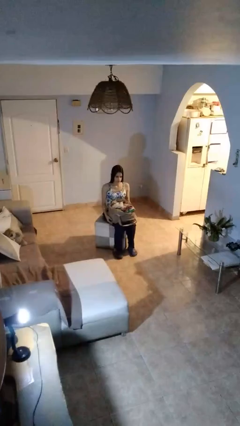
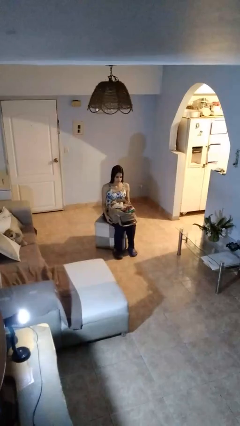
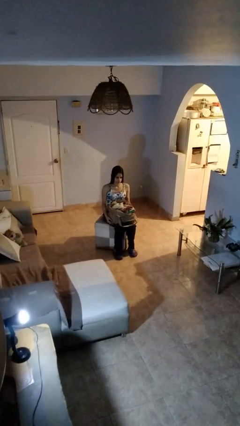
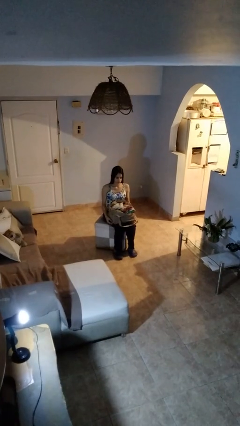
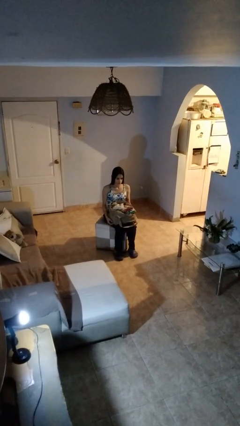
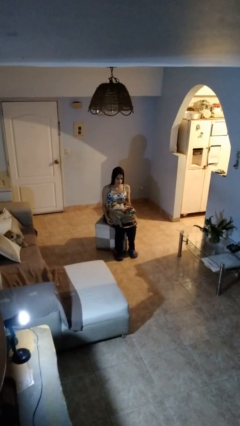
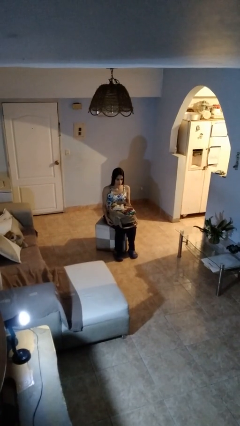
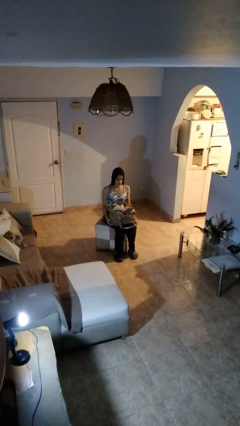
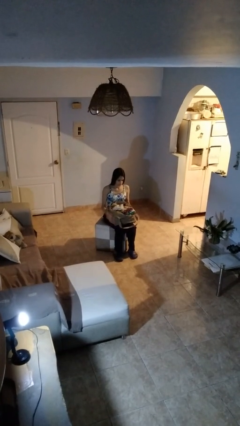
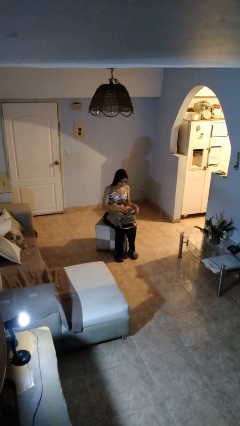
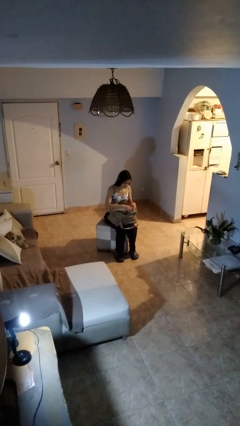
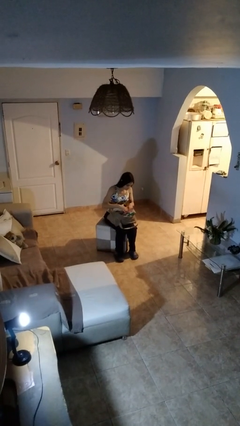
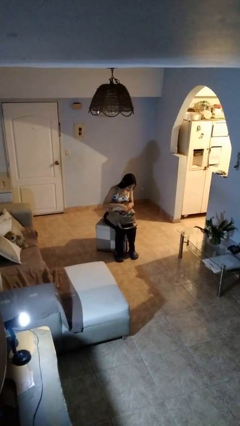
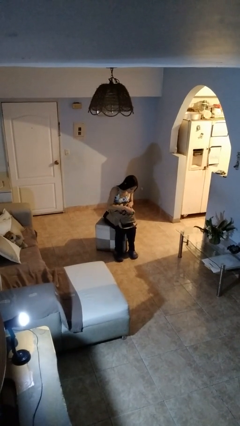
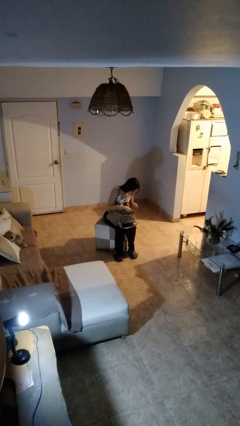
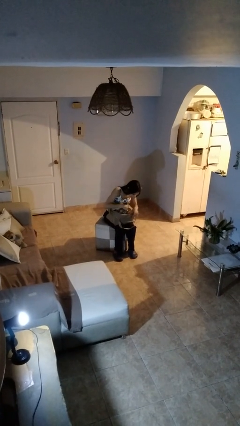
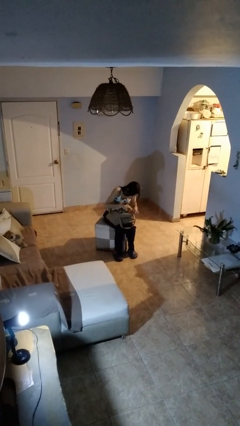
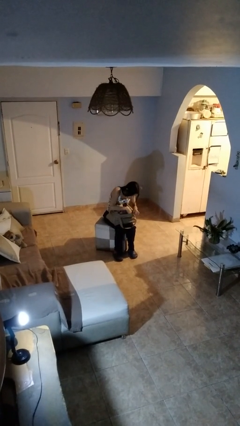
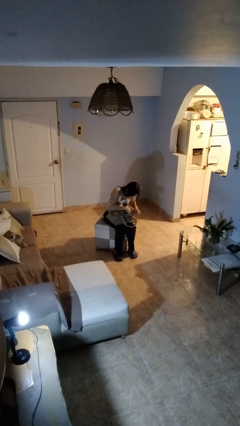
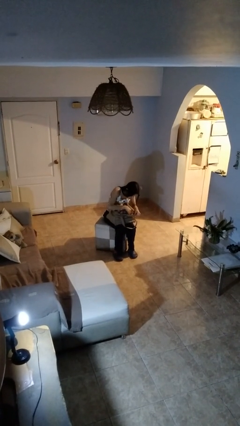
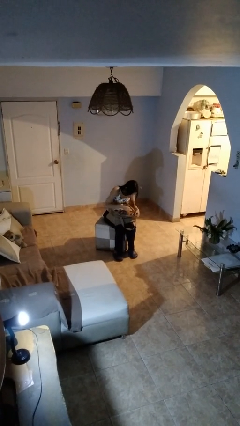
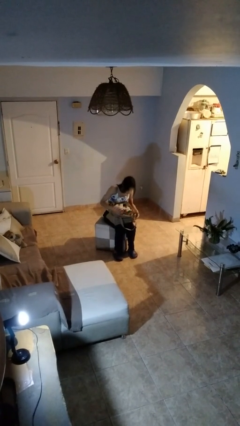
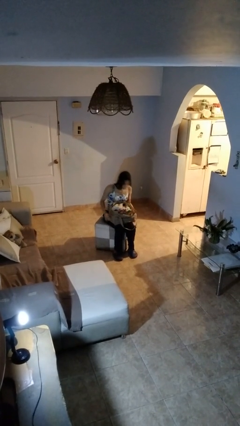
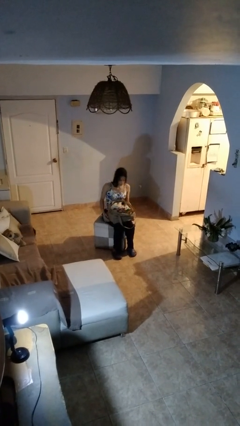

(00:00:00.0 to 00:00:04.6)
person searches in bag

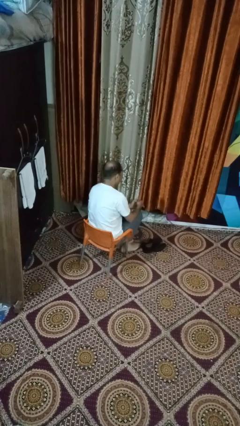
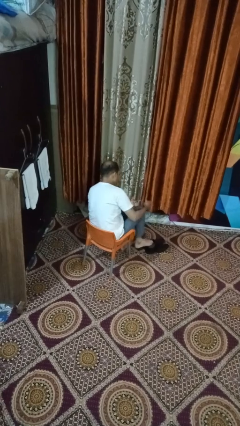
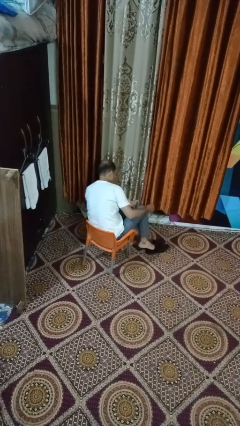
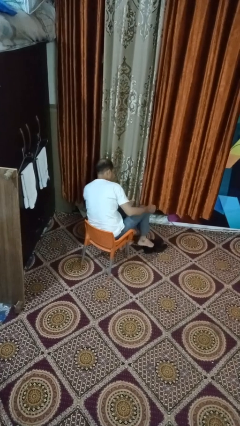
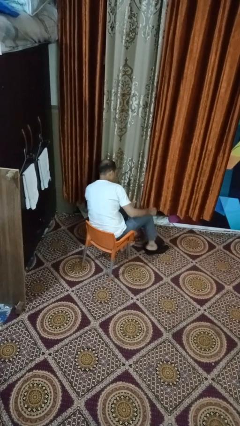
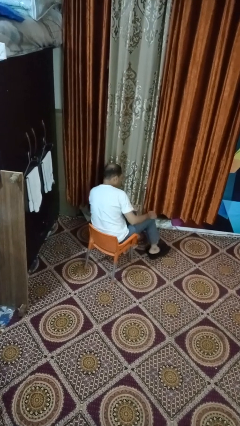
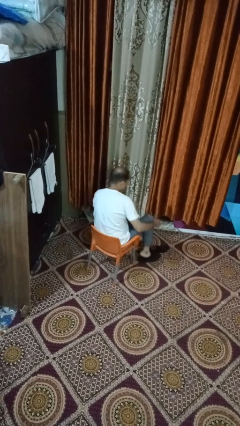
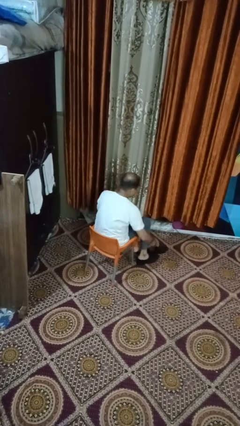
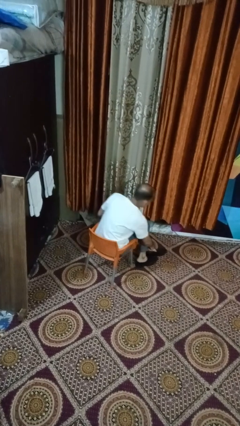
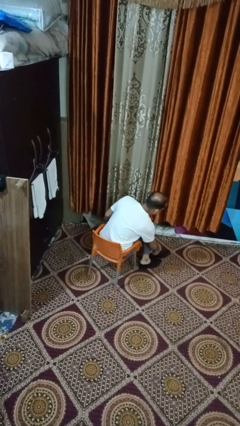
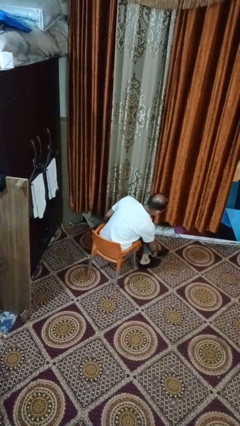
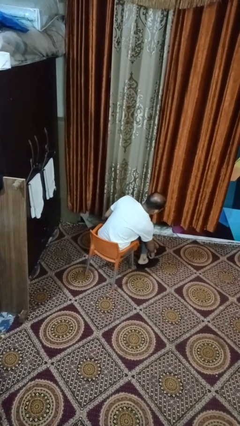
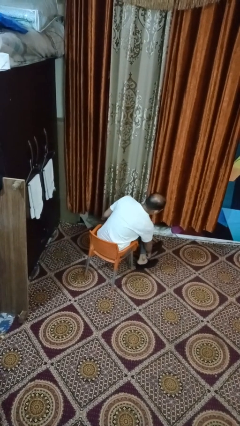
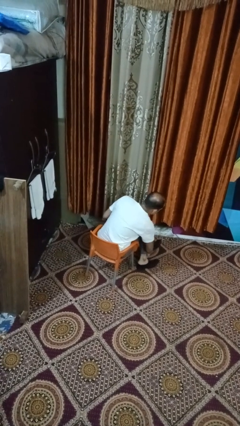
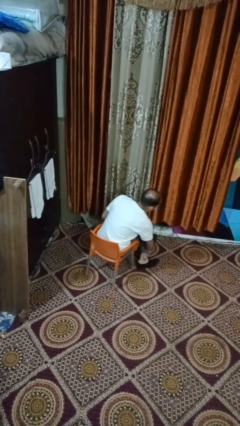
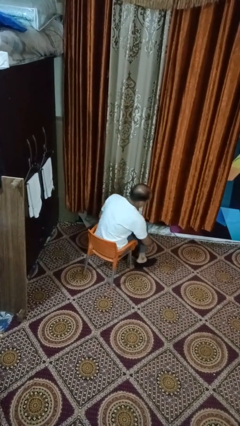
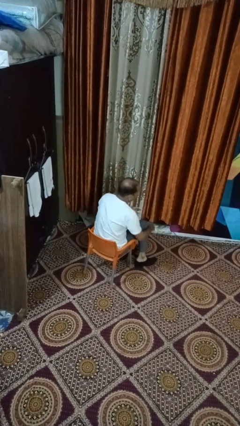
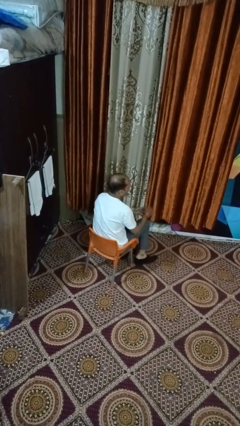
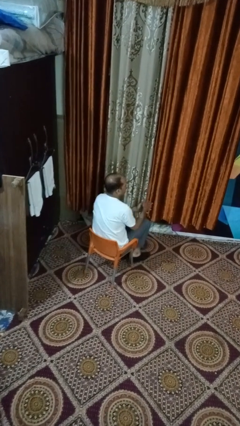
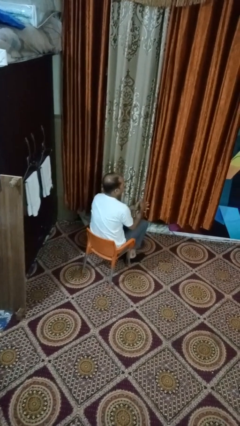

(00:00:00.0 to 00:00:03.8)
person puts on shoes

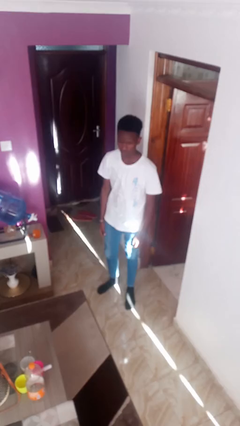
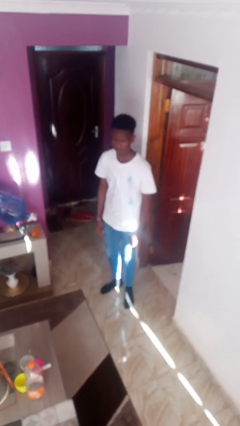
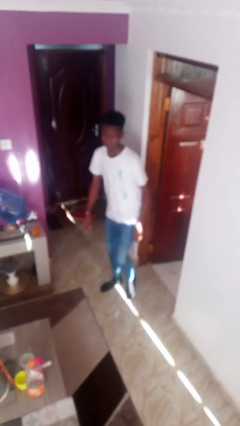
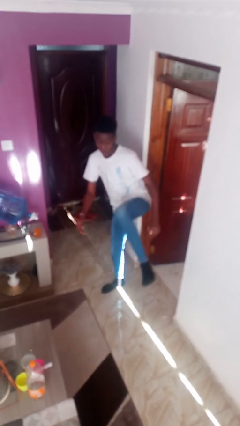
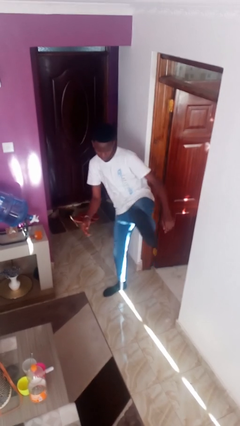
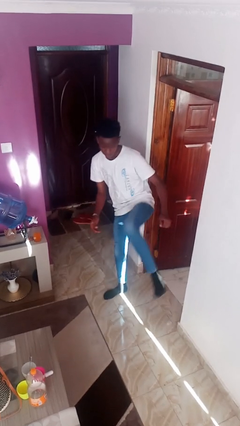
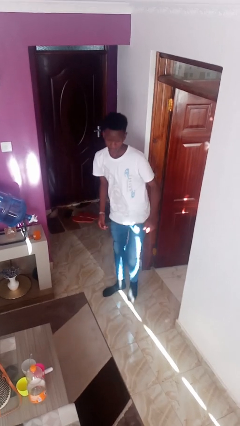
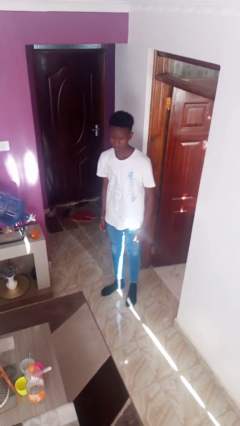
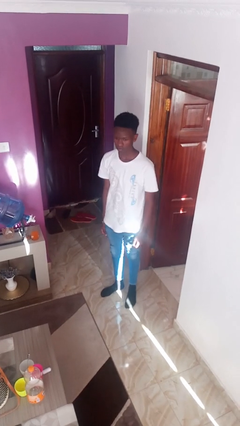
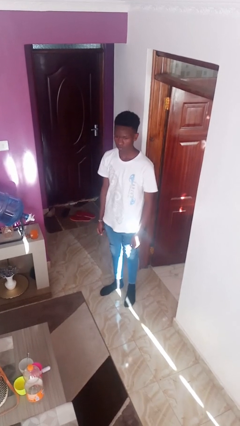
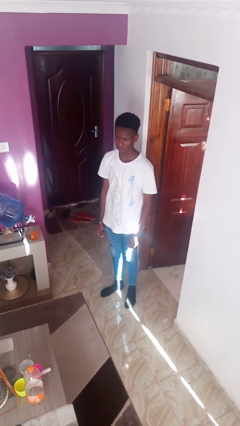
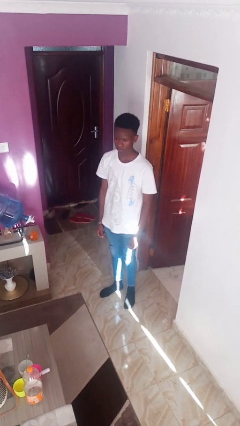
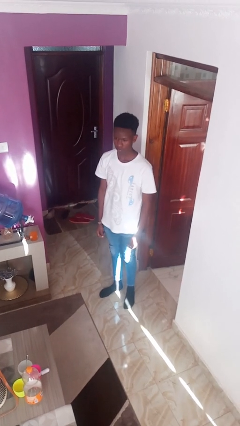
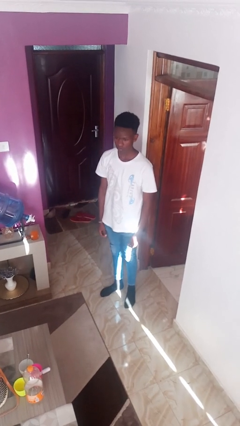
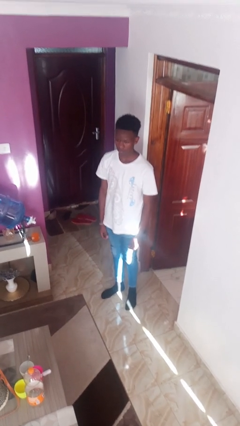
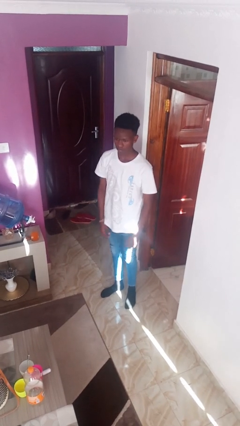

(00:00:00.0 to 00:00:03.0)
person karate kicks

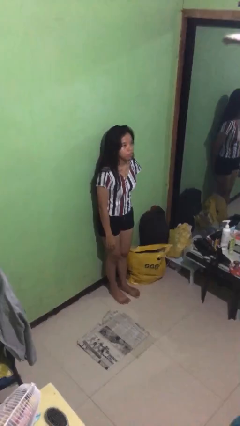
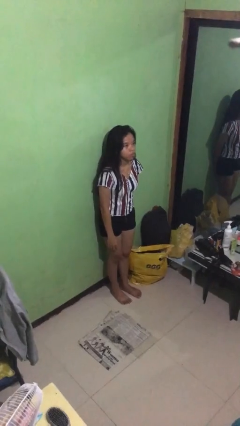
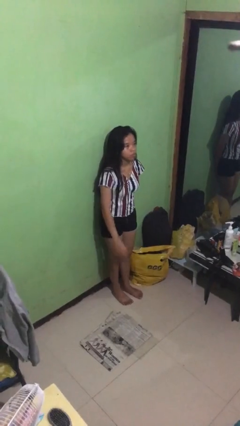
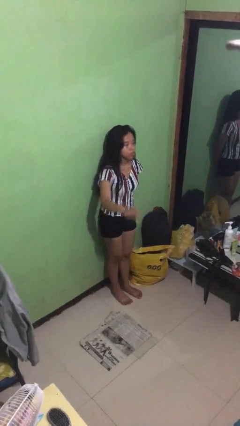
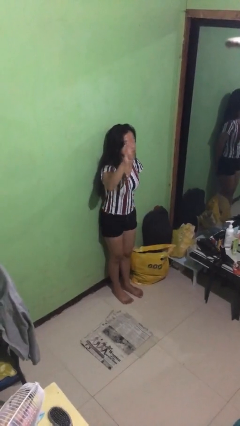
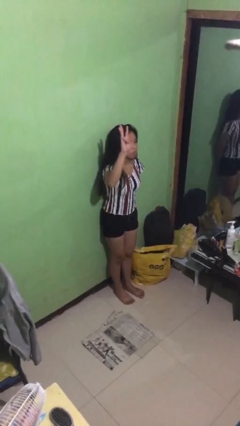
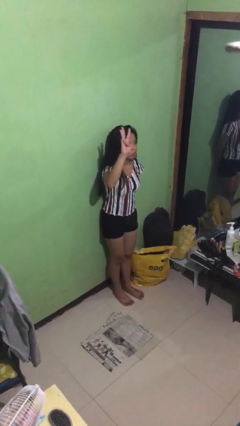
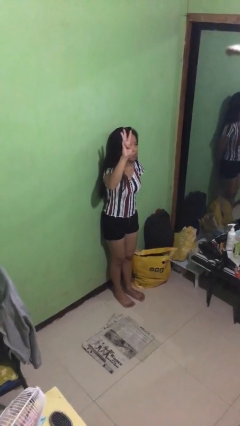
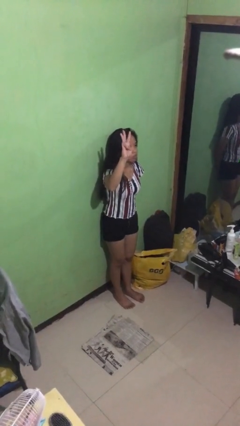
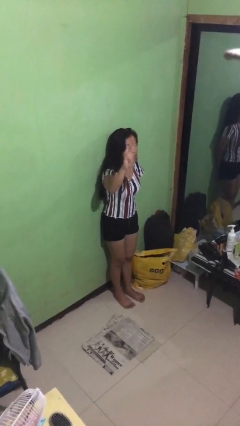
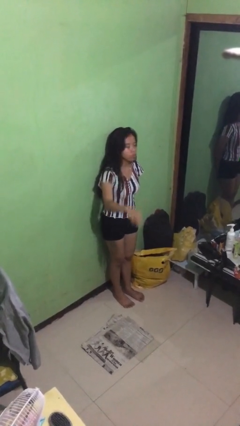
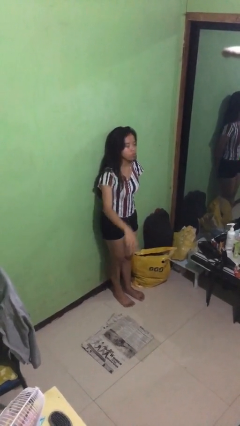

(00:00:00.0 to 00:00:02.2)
person gestures number three

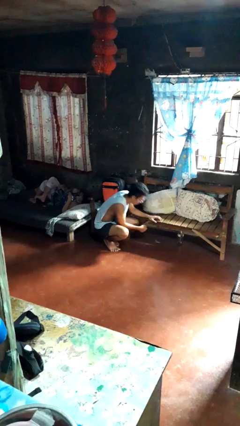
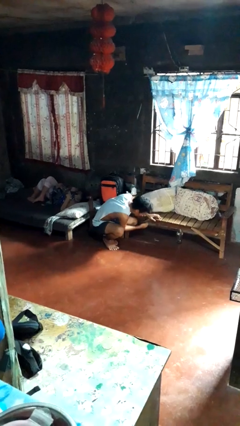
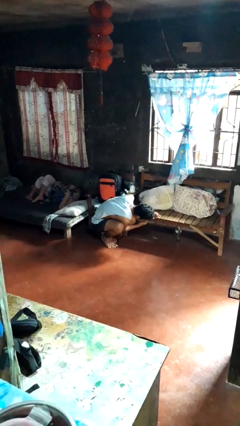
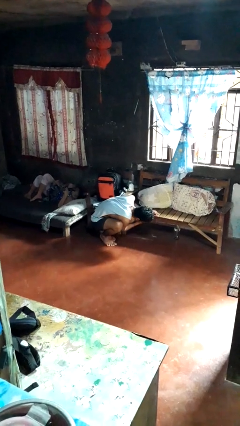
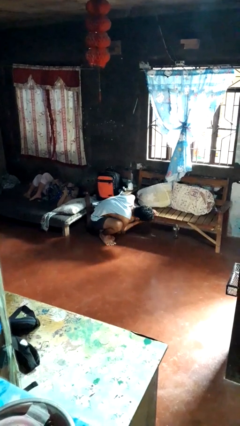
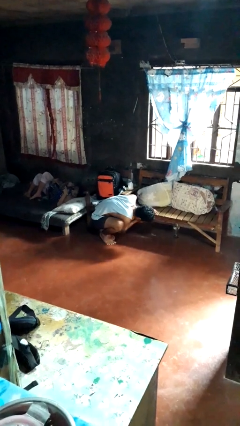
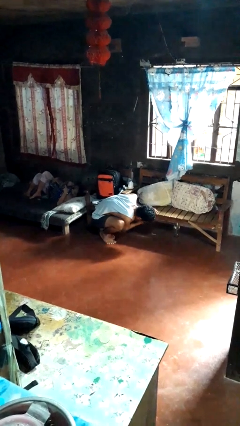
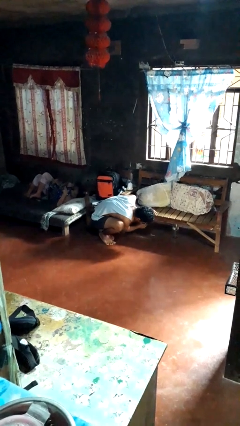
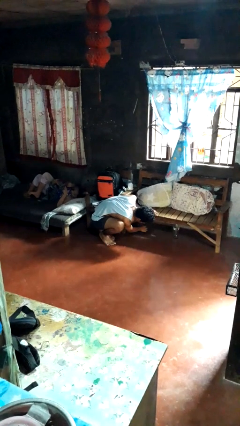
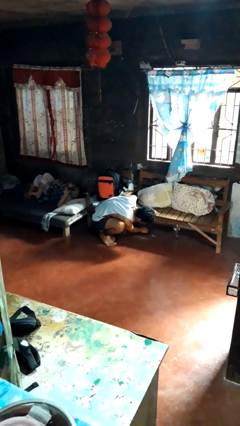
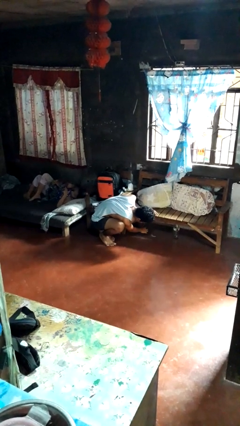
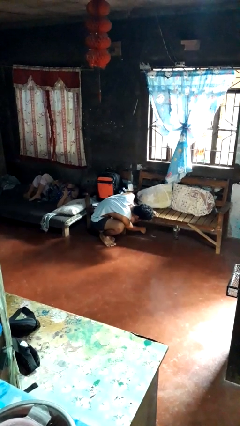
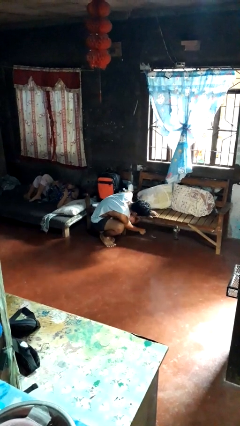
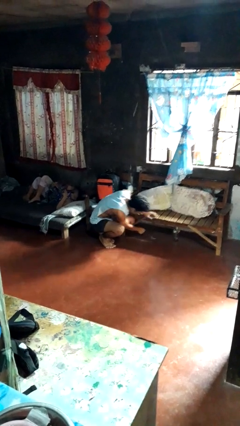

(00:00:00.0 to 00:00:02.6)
person searches under couch

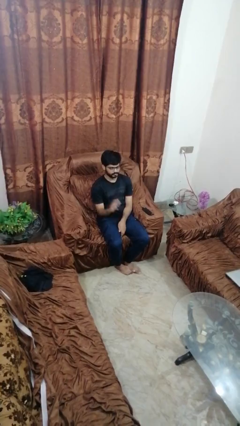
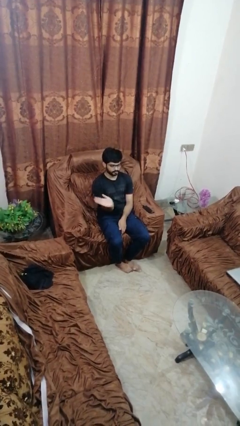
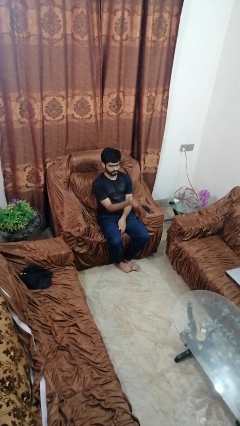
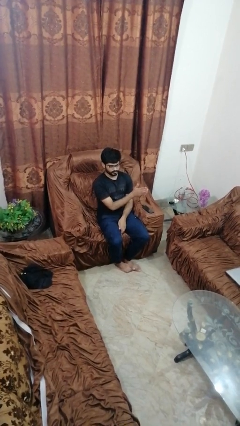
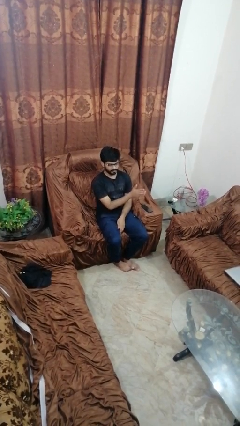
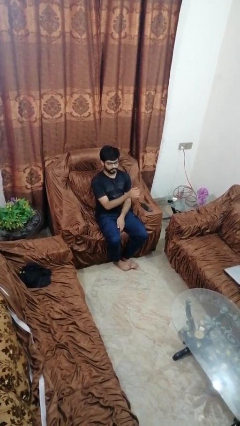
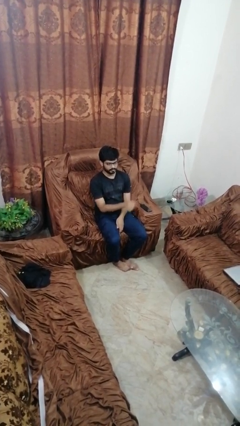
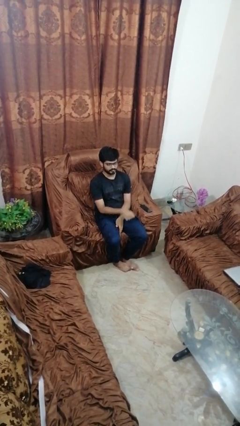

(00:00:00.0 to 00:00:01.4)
person gestures swipe left
